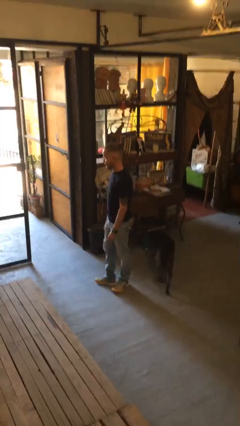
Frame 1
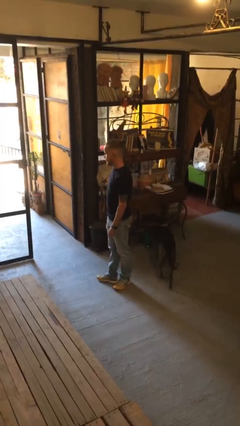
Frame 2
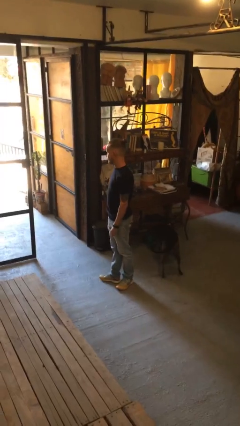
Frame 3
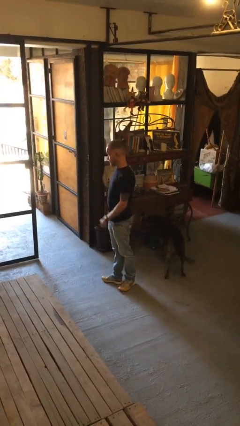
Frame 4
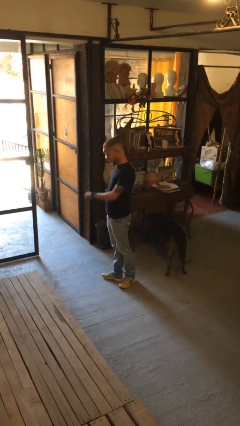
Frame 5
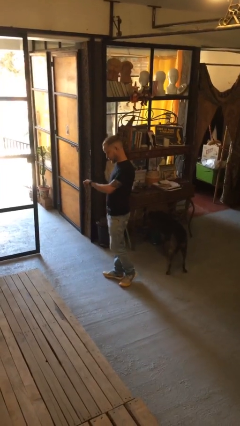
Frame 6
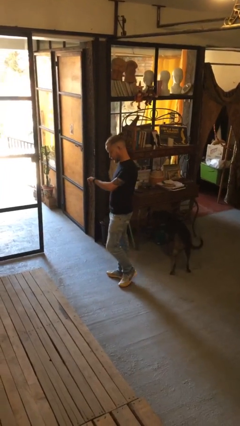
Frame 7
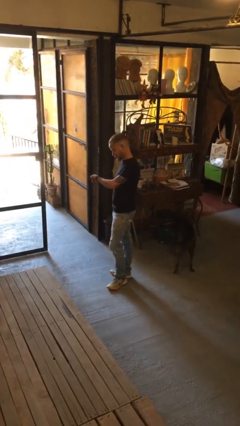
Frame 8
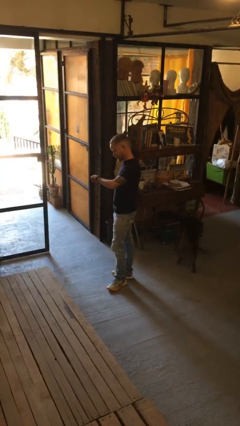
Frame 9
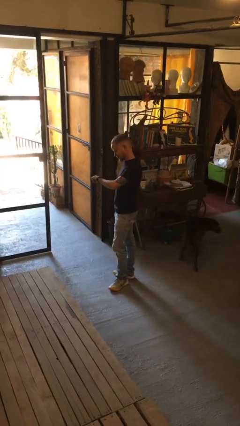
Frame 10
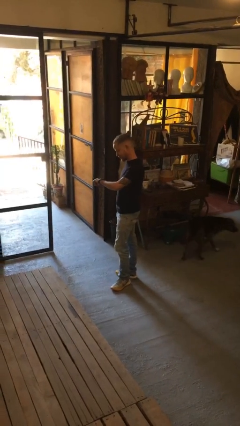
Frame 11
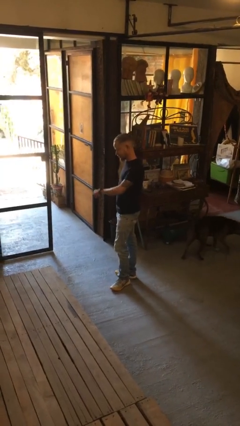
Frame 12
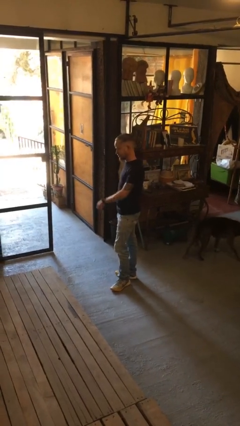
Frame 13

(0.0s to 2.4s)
person looks at wristwatch

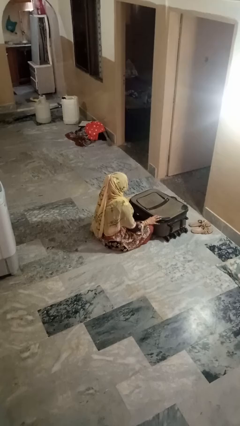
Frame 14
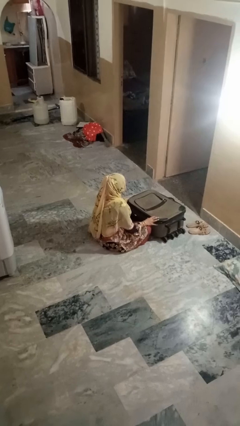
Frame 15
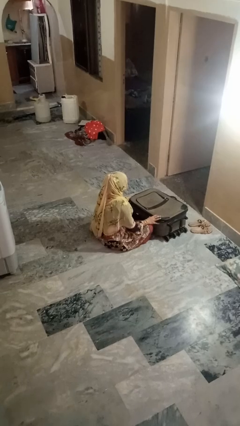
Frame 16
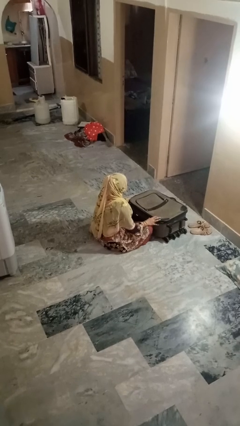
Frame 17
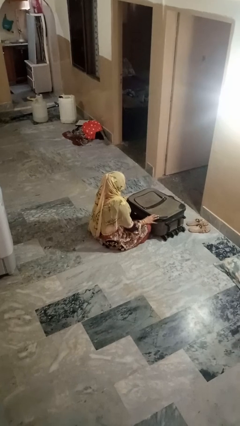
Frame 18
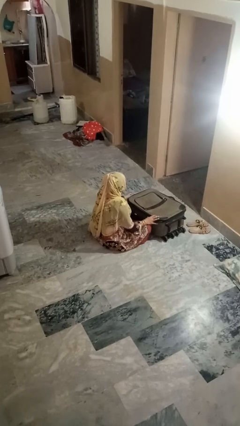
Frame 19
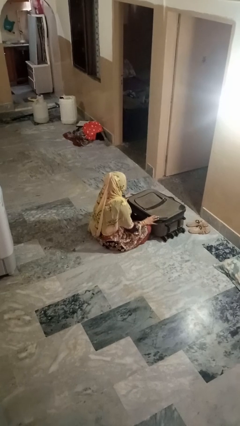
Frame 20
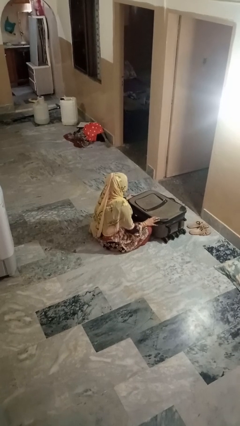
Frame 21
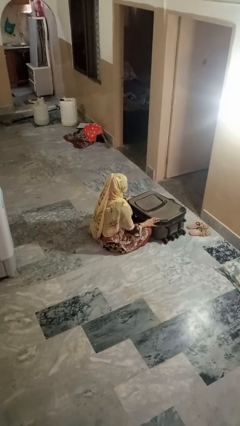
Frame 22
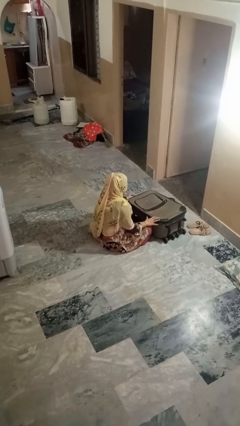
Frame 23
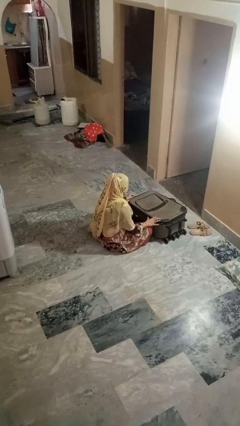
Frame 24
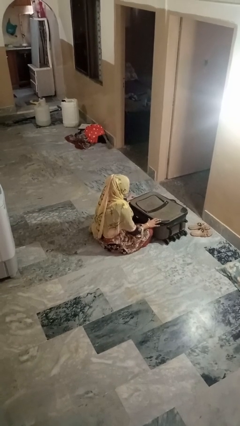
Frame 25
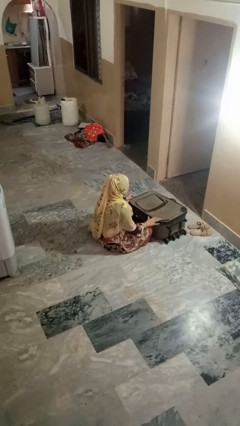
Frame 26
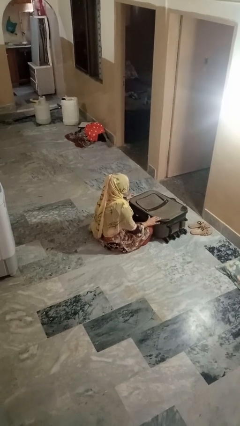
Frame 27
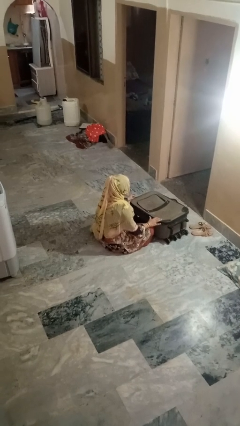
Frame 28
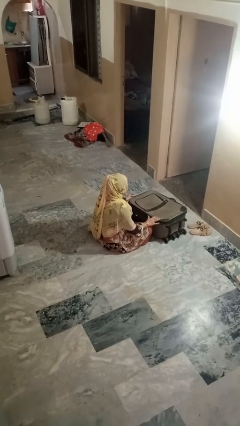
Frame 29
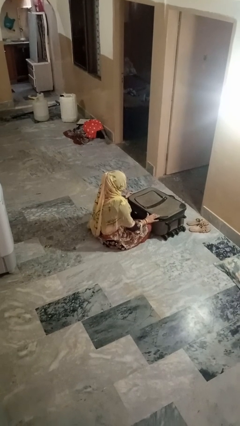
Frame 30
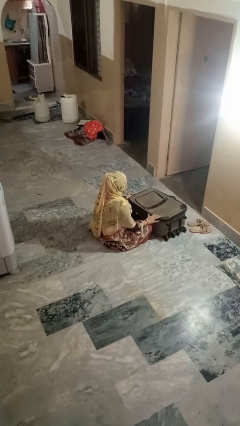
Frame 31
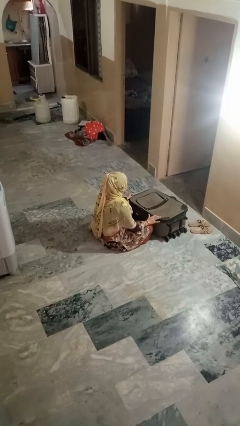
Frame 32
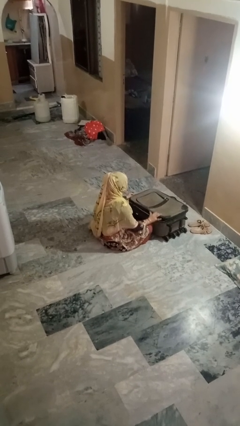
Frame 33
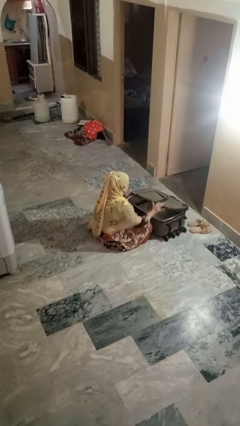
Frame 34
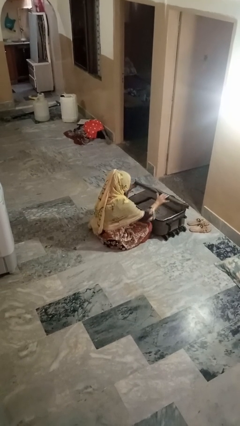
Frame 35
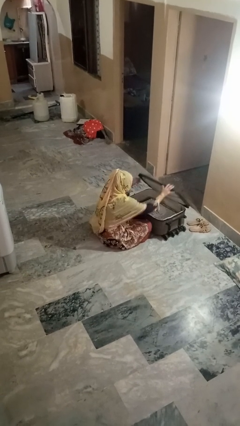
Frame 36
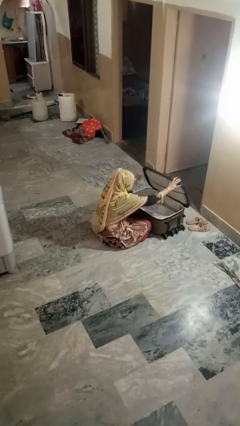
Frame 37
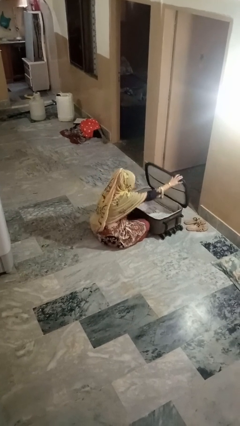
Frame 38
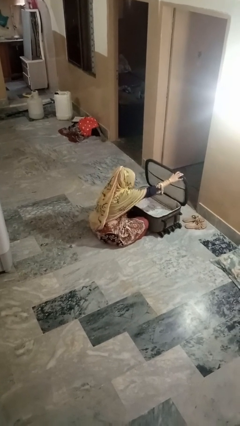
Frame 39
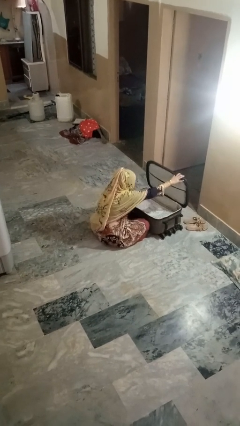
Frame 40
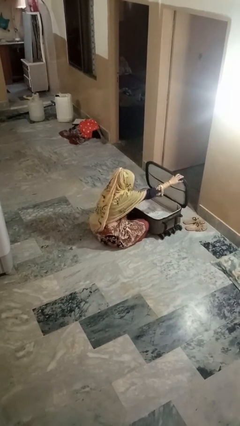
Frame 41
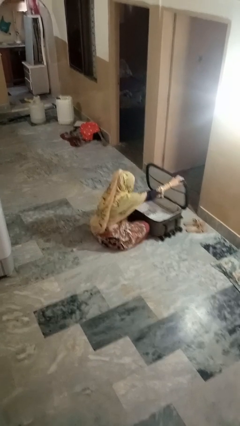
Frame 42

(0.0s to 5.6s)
person opens suitcase

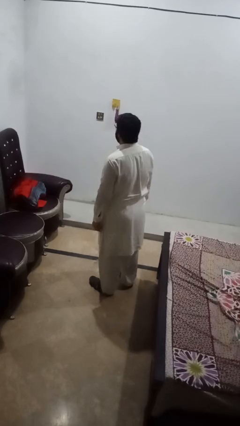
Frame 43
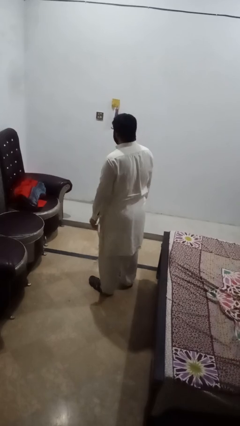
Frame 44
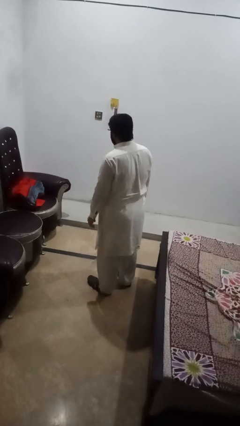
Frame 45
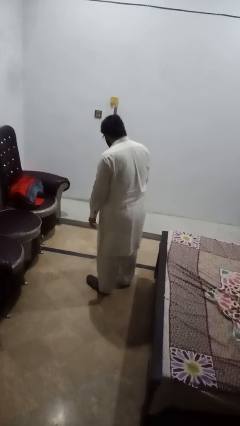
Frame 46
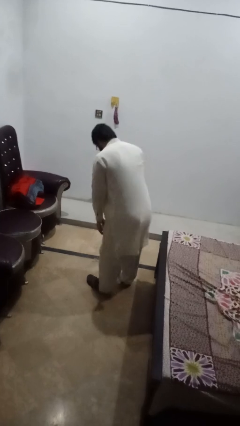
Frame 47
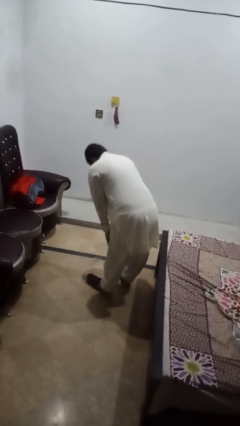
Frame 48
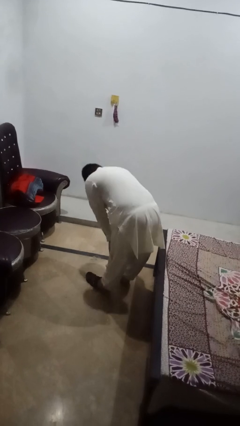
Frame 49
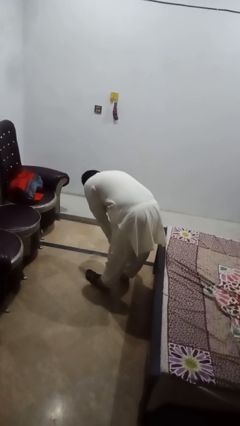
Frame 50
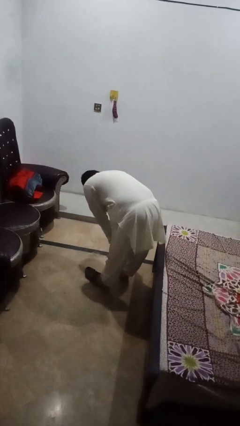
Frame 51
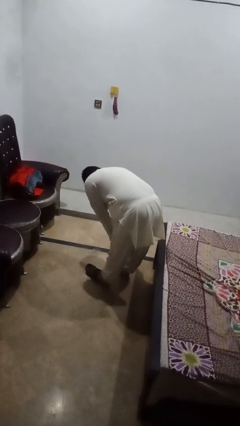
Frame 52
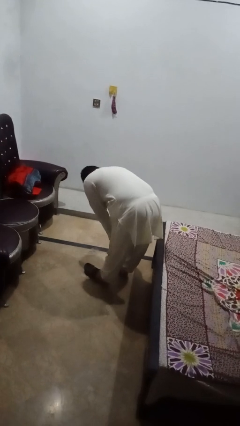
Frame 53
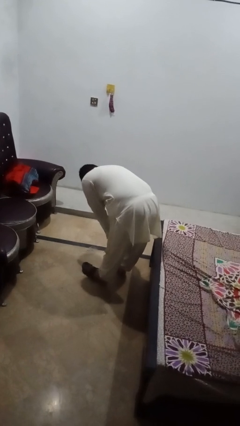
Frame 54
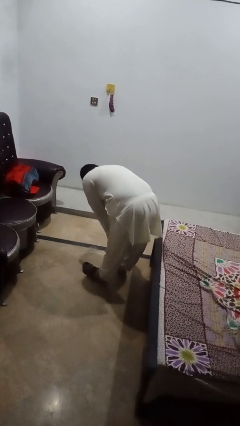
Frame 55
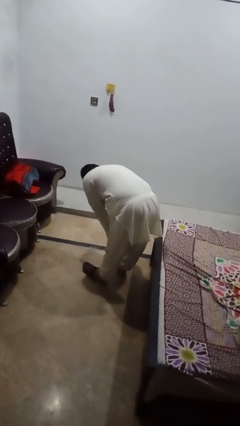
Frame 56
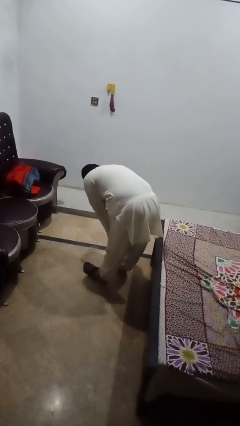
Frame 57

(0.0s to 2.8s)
person squats

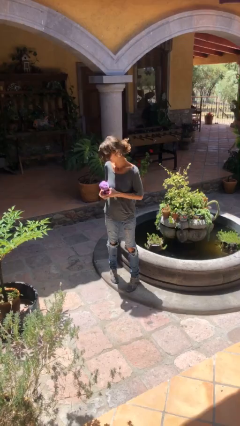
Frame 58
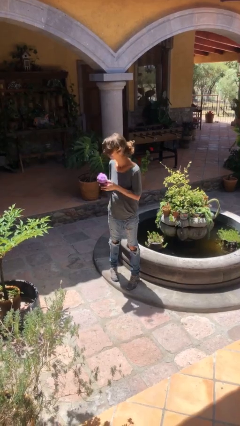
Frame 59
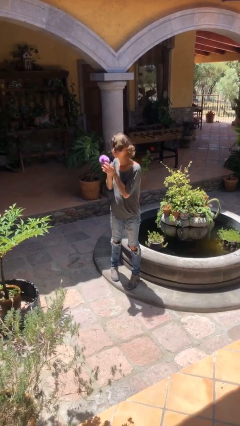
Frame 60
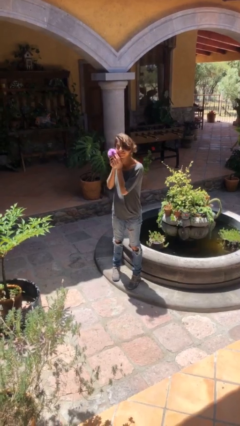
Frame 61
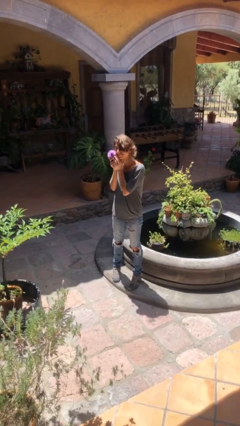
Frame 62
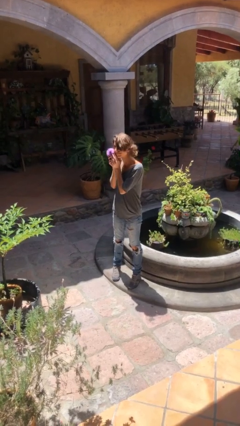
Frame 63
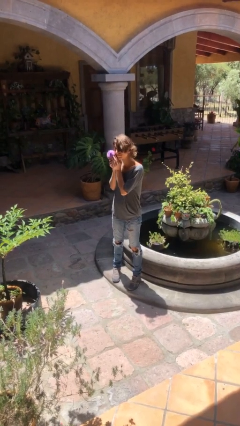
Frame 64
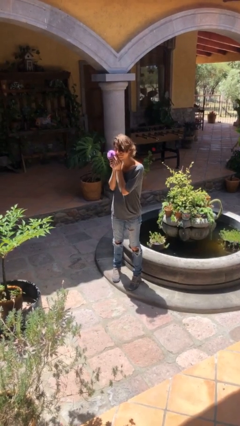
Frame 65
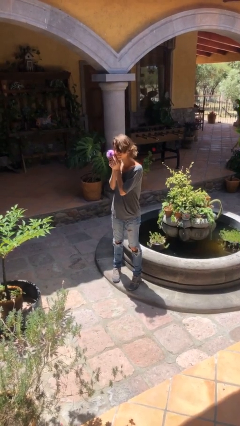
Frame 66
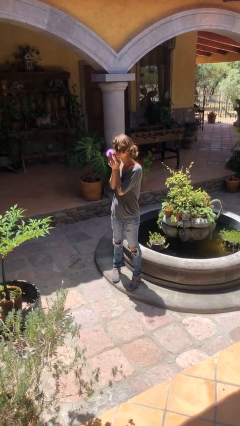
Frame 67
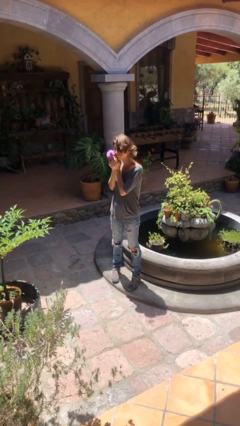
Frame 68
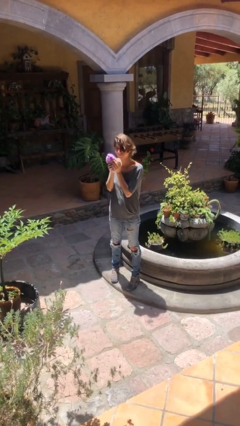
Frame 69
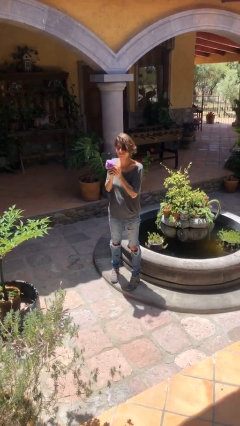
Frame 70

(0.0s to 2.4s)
person hugs stuffed animal

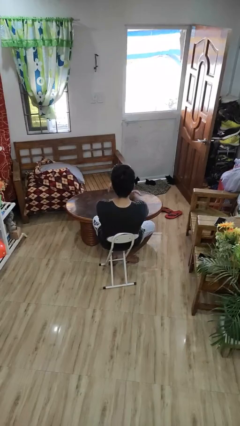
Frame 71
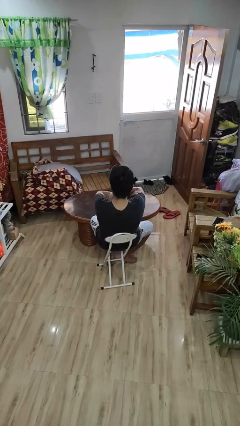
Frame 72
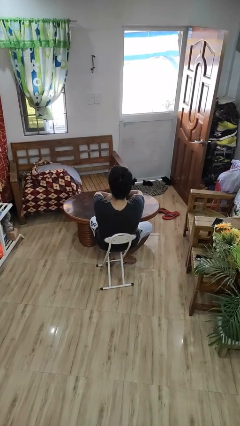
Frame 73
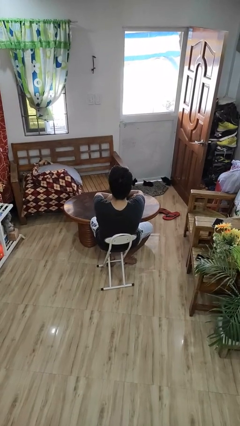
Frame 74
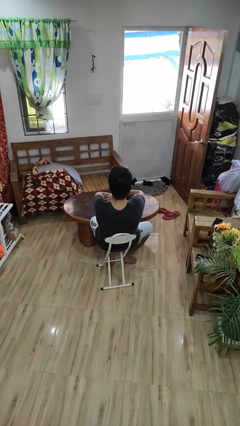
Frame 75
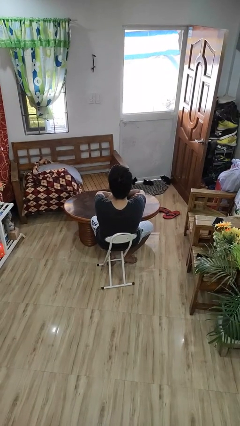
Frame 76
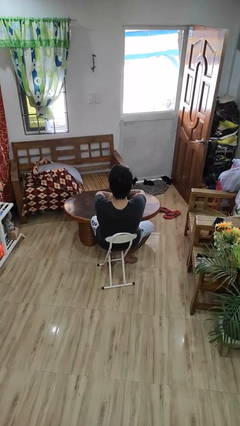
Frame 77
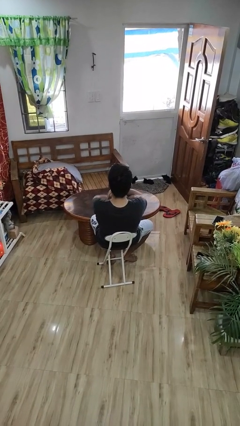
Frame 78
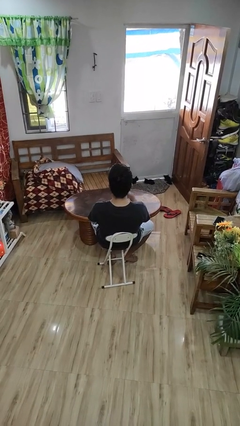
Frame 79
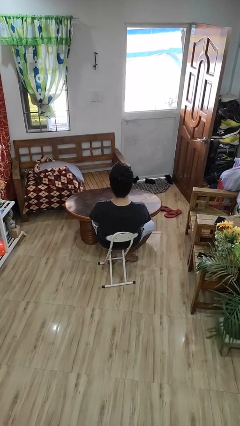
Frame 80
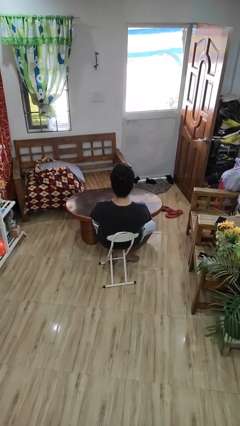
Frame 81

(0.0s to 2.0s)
person crosses arms

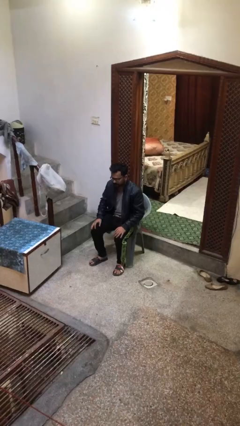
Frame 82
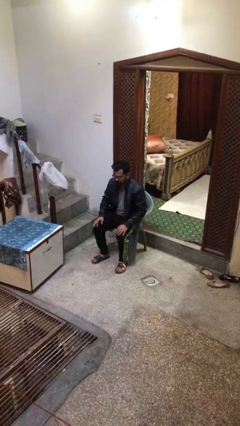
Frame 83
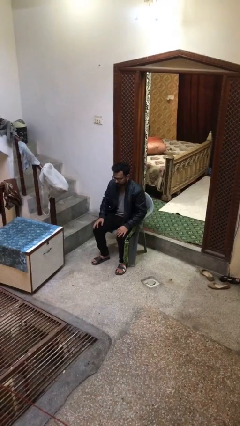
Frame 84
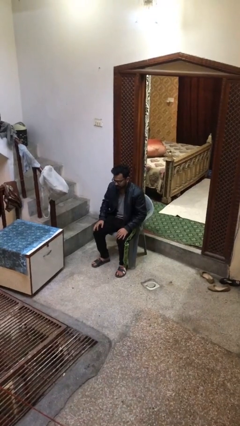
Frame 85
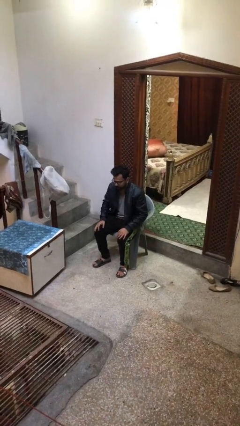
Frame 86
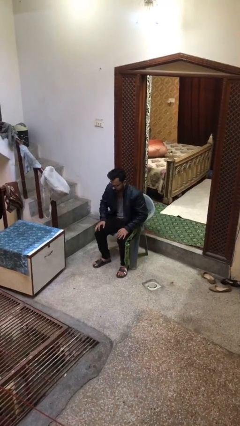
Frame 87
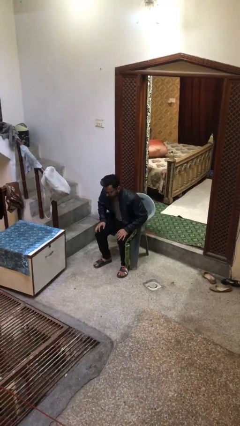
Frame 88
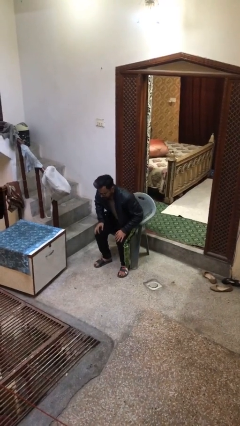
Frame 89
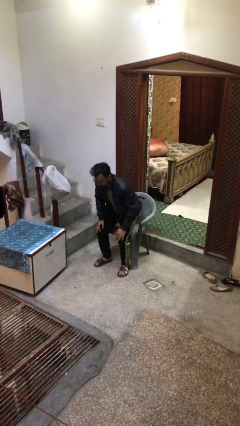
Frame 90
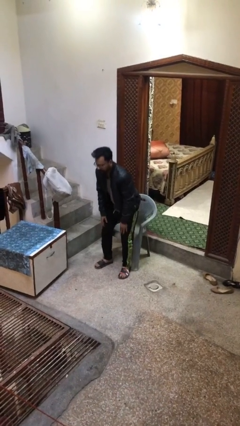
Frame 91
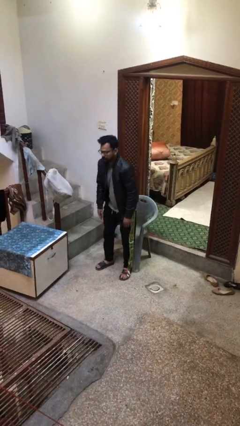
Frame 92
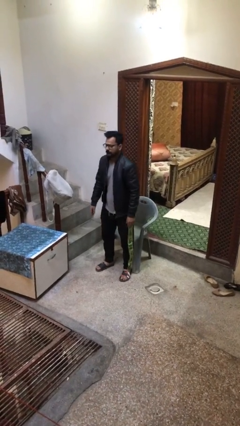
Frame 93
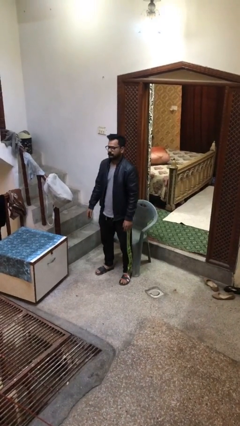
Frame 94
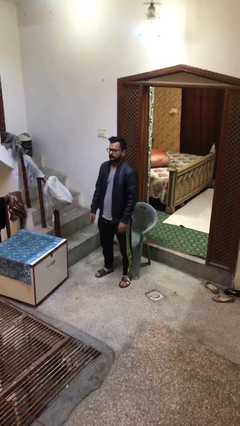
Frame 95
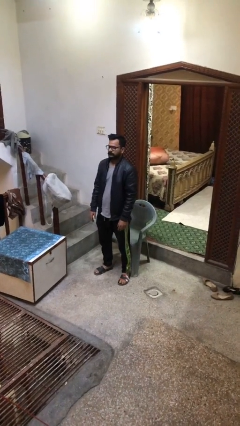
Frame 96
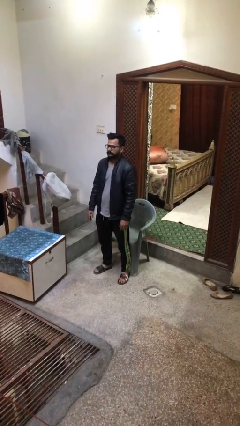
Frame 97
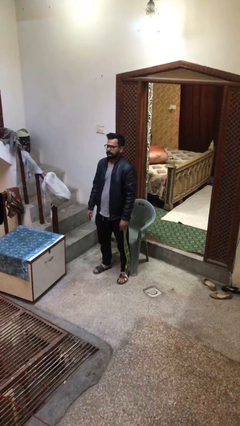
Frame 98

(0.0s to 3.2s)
person stands up
